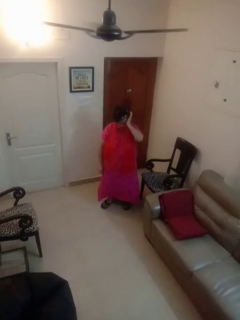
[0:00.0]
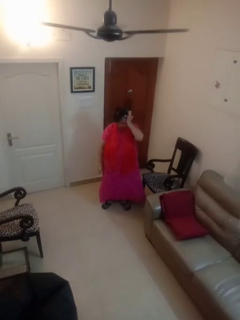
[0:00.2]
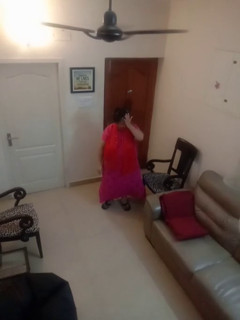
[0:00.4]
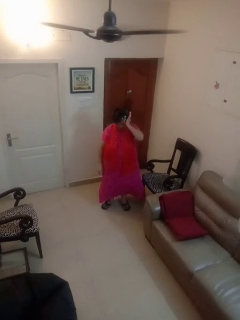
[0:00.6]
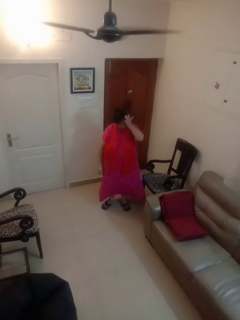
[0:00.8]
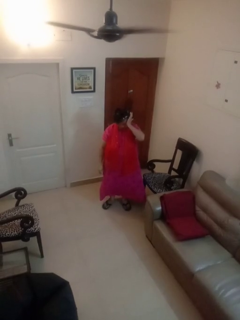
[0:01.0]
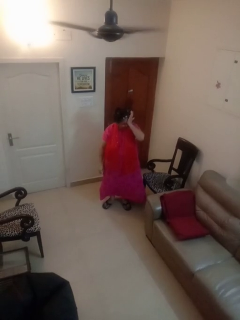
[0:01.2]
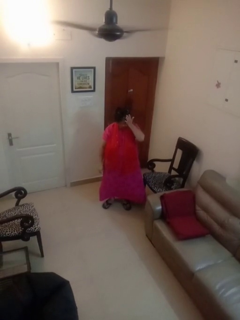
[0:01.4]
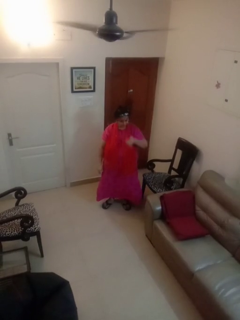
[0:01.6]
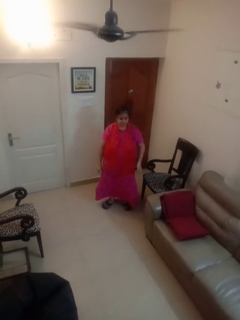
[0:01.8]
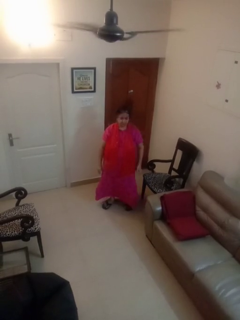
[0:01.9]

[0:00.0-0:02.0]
person rubs eyes

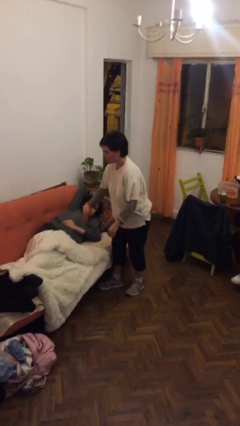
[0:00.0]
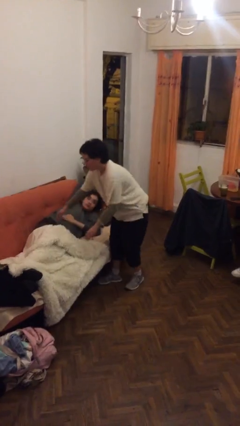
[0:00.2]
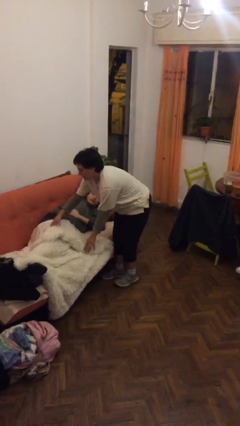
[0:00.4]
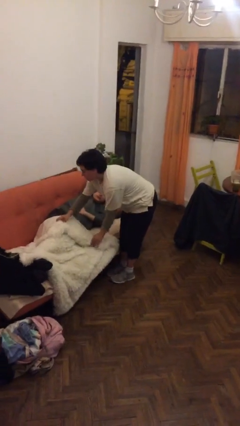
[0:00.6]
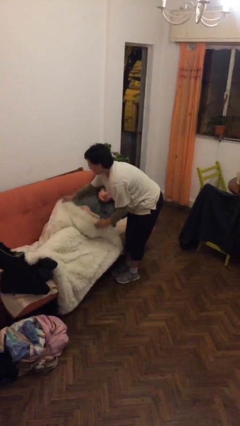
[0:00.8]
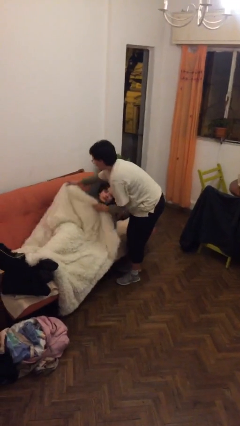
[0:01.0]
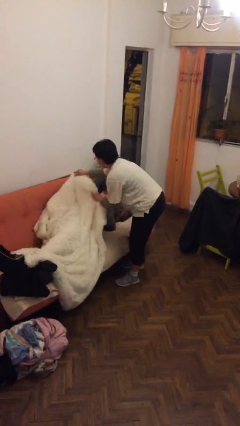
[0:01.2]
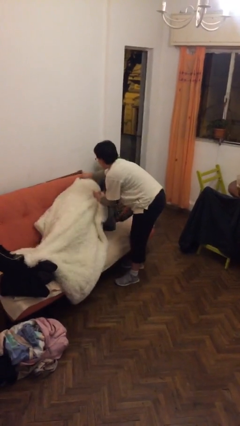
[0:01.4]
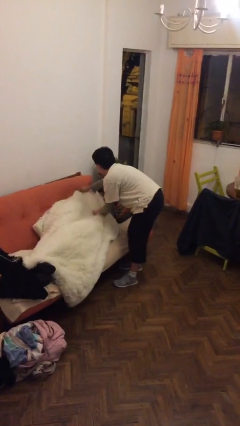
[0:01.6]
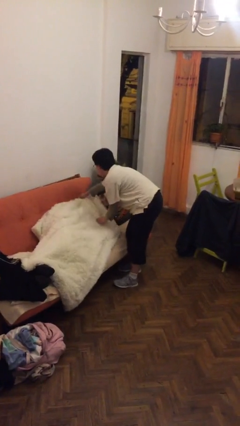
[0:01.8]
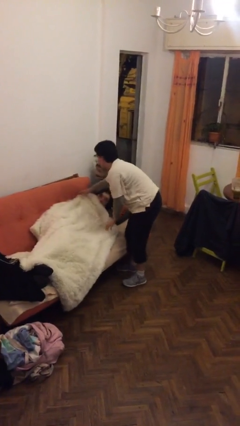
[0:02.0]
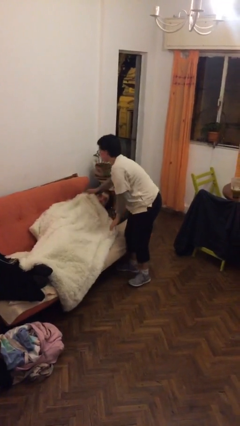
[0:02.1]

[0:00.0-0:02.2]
person covers friend with blanket

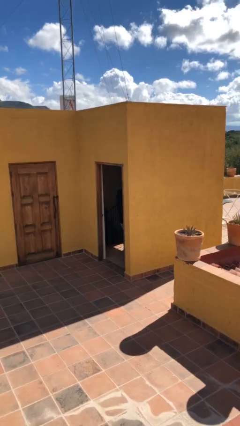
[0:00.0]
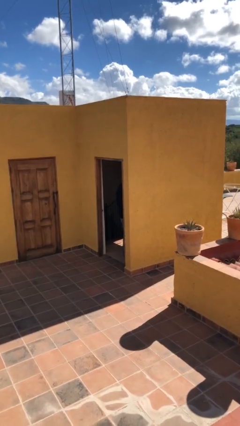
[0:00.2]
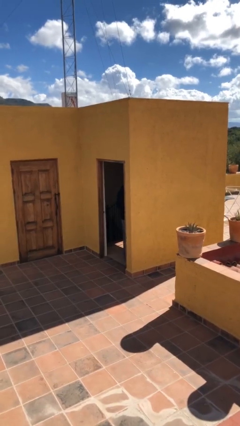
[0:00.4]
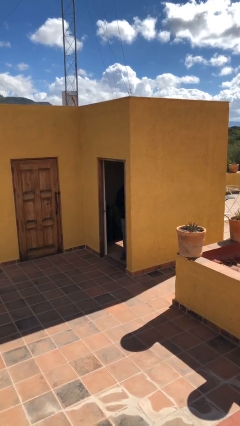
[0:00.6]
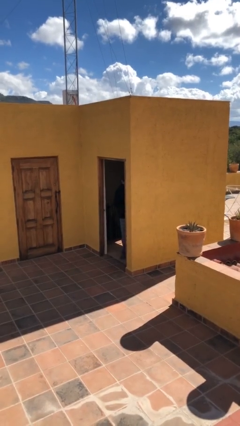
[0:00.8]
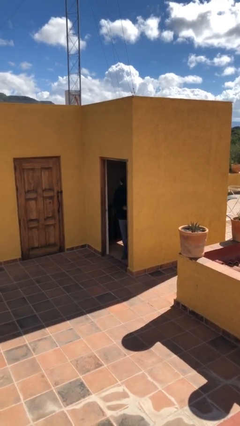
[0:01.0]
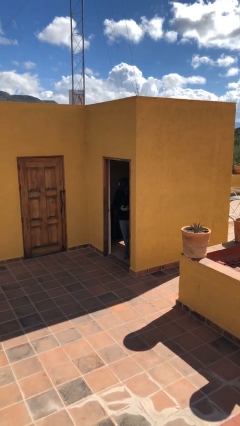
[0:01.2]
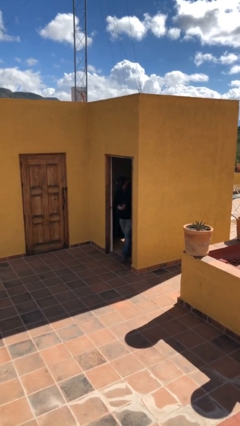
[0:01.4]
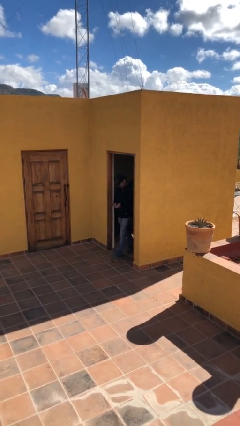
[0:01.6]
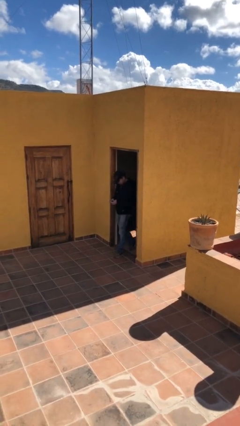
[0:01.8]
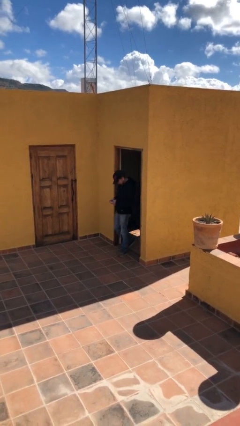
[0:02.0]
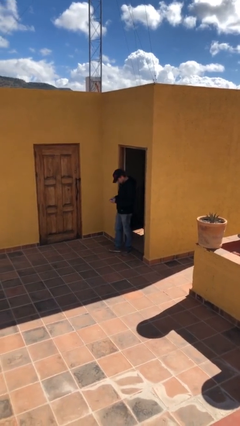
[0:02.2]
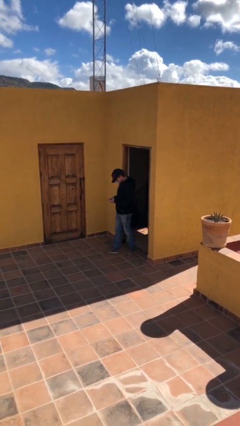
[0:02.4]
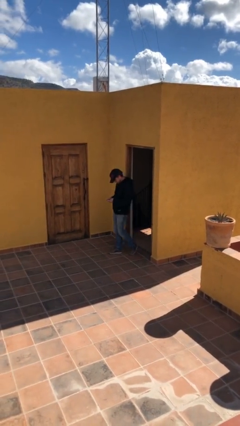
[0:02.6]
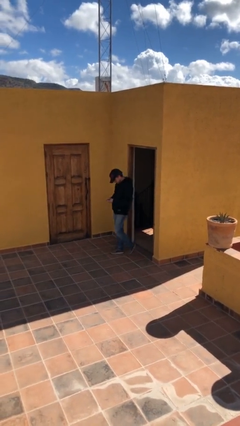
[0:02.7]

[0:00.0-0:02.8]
person enters scene through structure

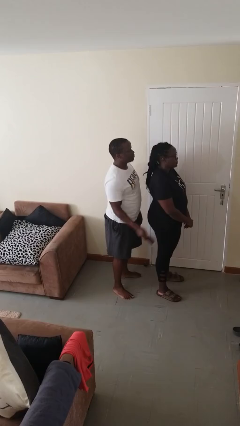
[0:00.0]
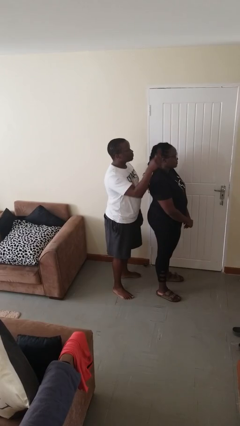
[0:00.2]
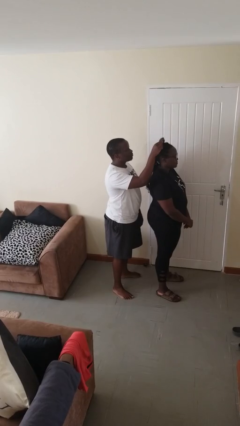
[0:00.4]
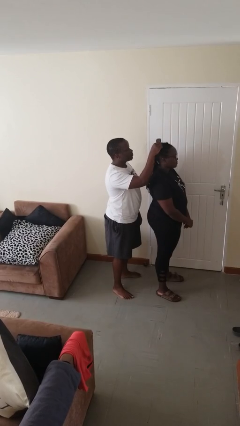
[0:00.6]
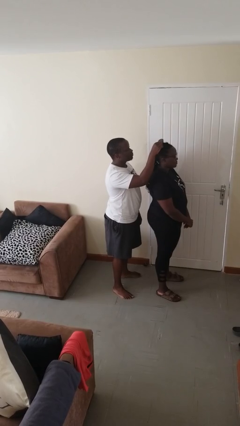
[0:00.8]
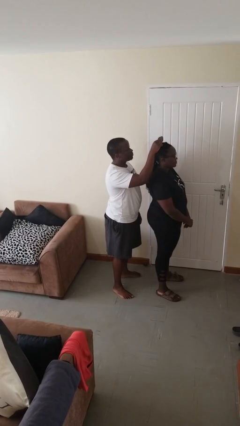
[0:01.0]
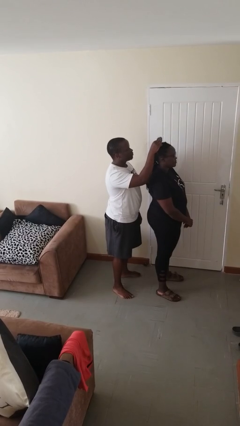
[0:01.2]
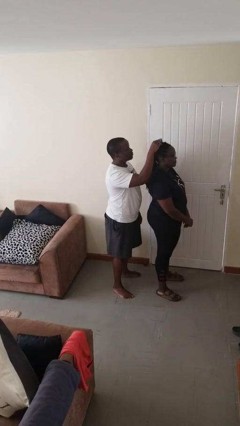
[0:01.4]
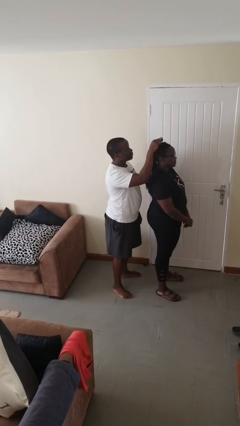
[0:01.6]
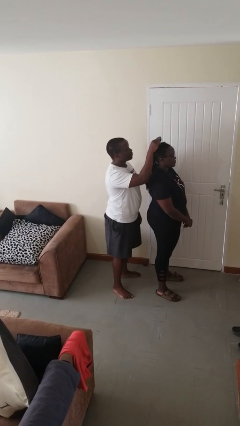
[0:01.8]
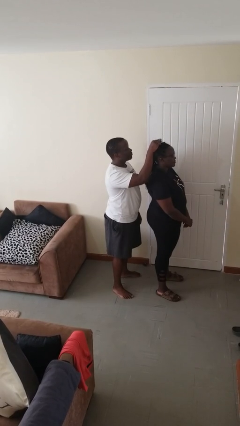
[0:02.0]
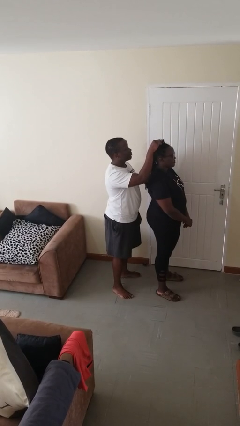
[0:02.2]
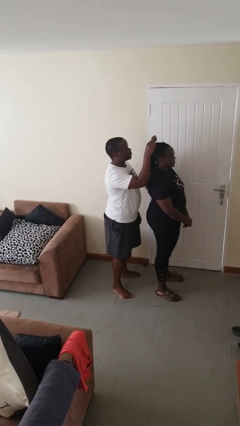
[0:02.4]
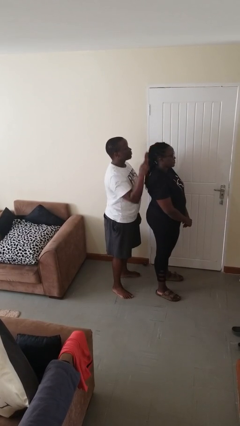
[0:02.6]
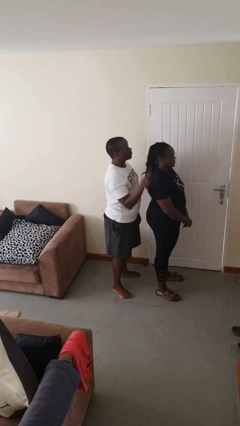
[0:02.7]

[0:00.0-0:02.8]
person brushes hair of person

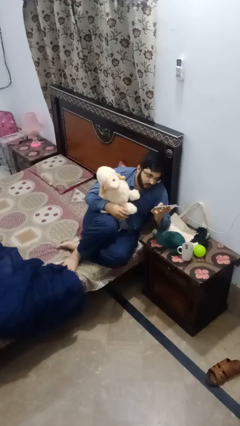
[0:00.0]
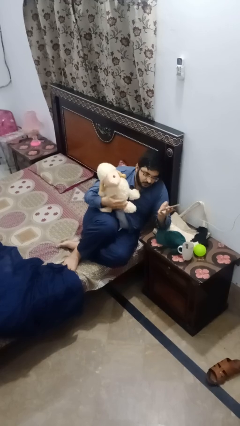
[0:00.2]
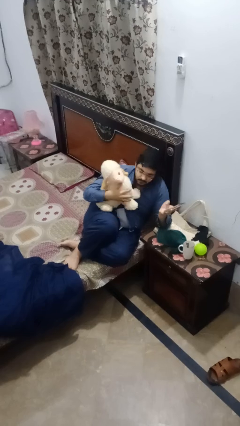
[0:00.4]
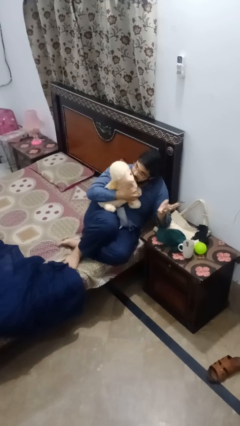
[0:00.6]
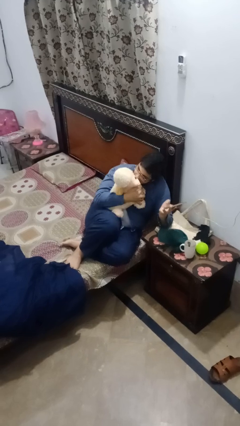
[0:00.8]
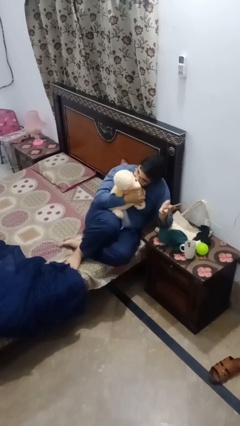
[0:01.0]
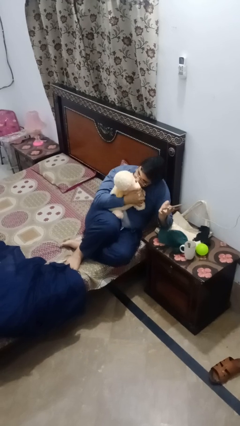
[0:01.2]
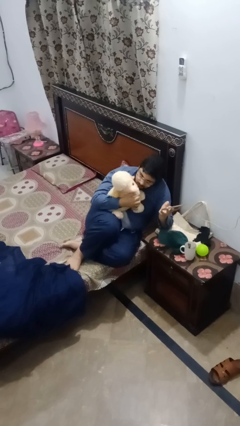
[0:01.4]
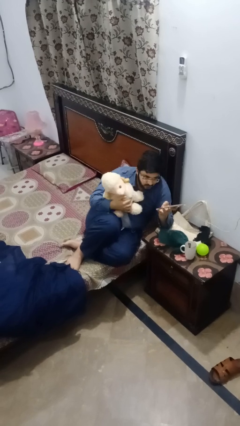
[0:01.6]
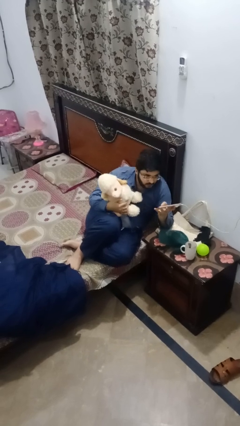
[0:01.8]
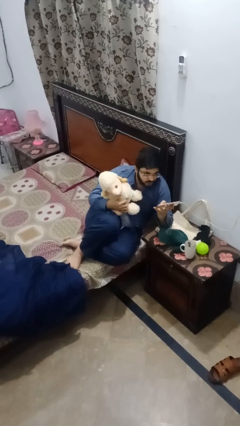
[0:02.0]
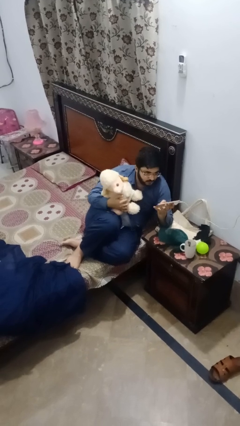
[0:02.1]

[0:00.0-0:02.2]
person hugs stuffed animal

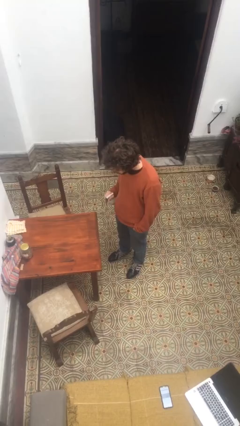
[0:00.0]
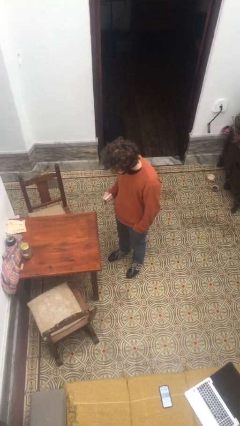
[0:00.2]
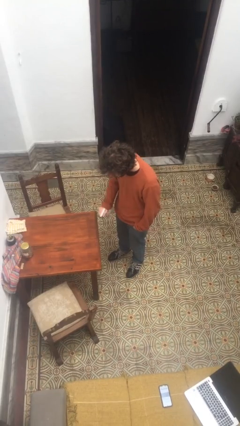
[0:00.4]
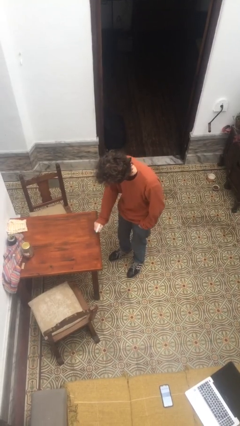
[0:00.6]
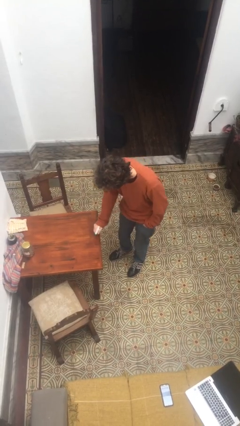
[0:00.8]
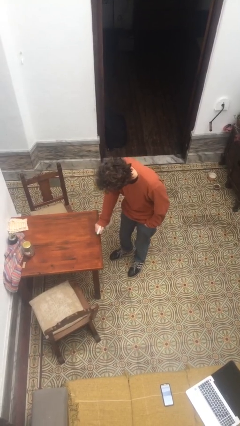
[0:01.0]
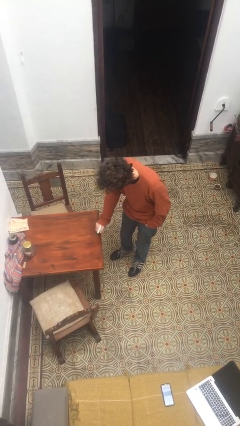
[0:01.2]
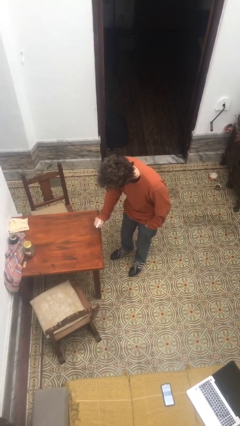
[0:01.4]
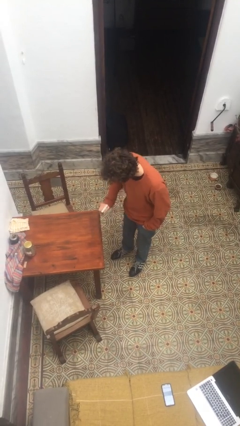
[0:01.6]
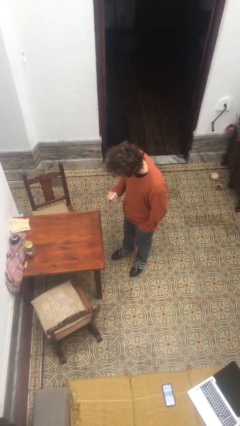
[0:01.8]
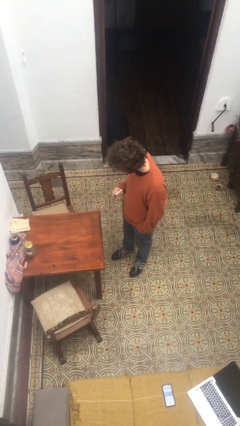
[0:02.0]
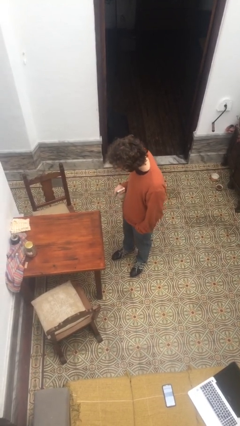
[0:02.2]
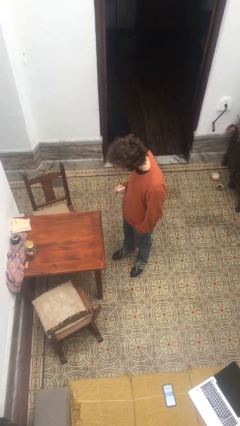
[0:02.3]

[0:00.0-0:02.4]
person sprays from bottle

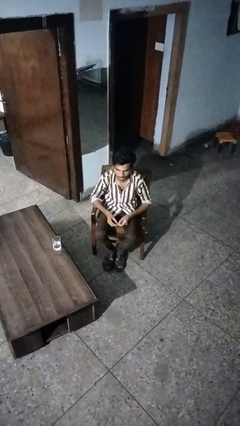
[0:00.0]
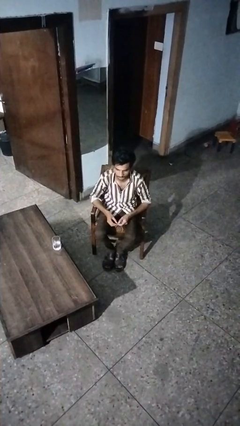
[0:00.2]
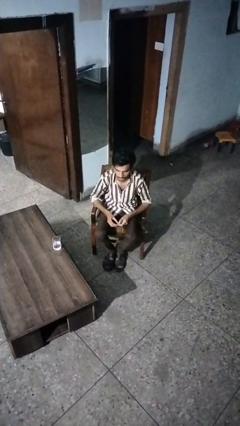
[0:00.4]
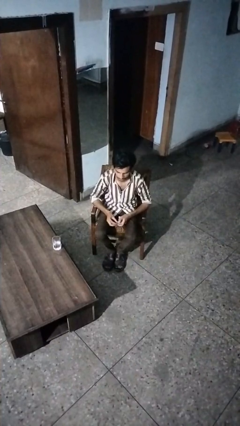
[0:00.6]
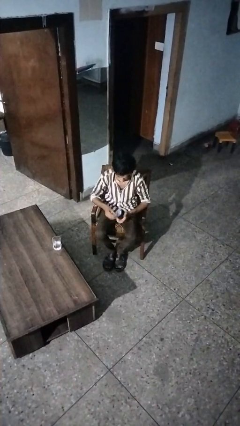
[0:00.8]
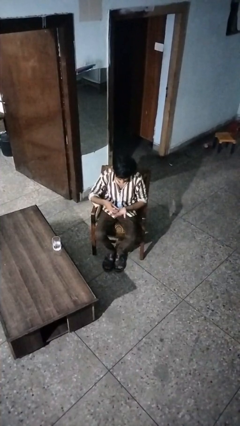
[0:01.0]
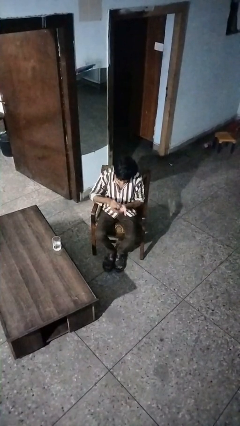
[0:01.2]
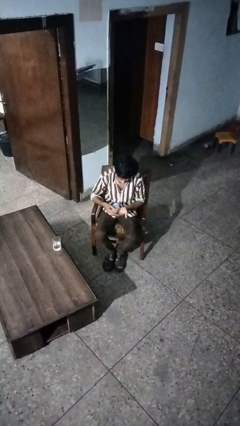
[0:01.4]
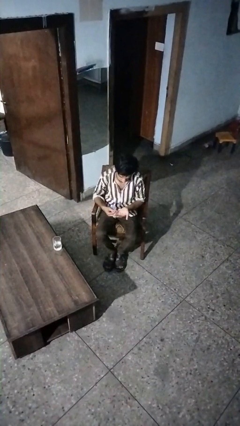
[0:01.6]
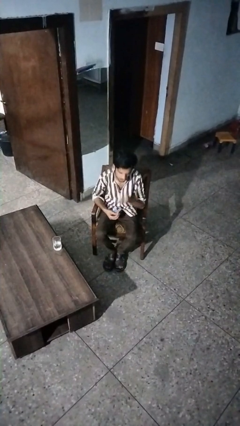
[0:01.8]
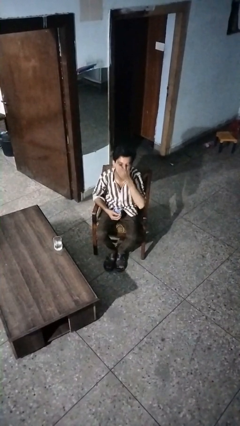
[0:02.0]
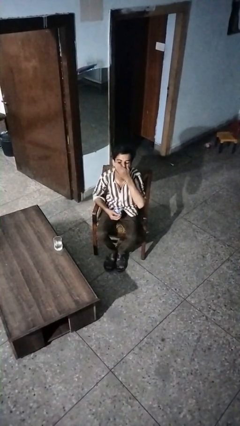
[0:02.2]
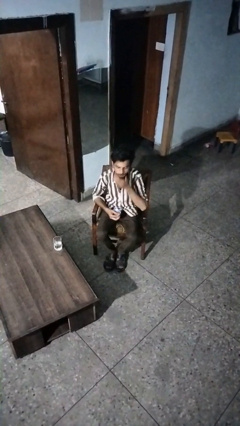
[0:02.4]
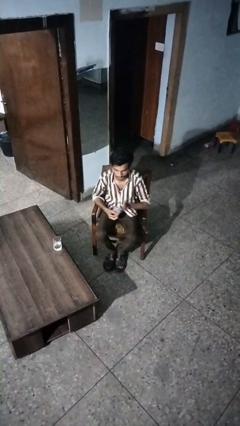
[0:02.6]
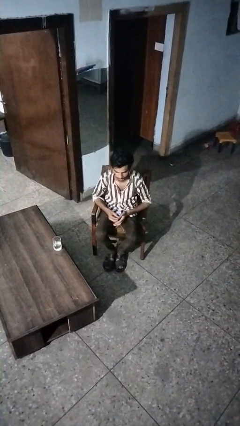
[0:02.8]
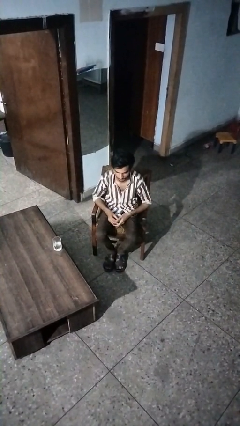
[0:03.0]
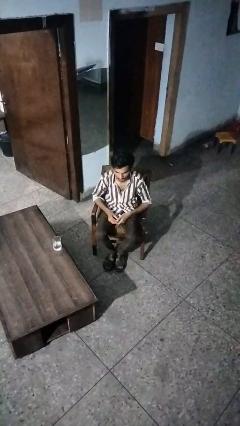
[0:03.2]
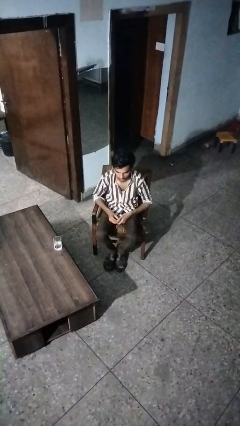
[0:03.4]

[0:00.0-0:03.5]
person takes medicine pills

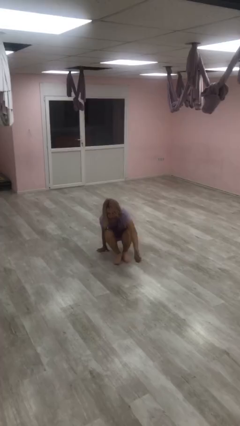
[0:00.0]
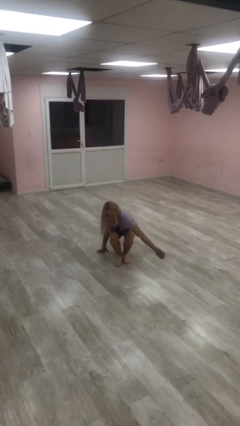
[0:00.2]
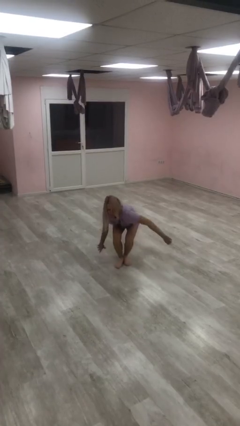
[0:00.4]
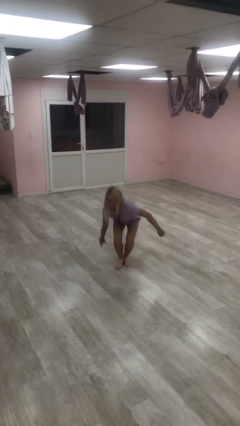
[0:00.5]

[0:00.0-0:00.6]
person stands up from floor
